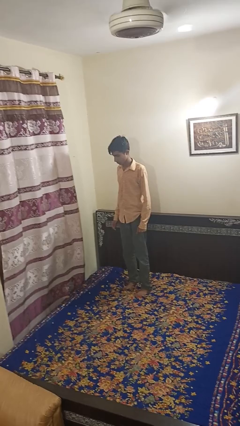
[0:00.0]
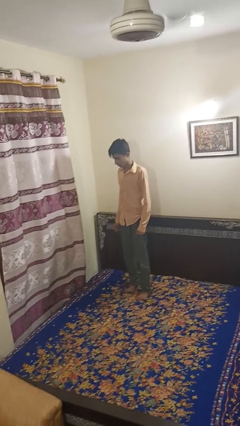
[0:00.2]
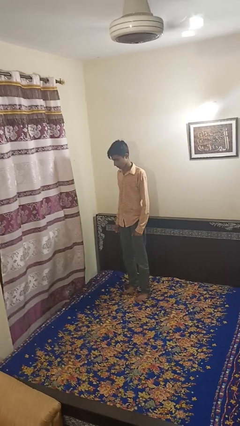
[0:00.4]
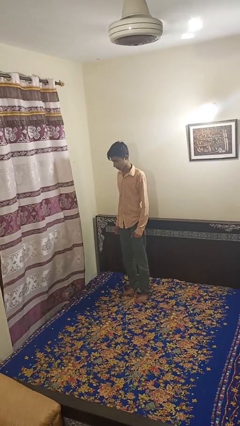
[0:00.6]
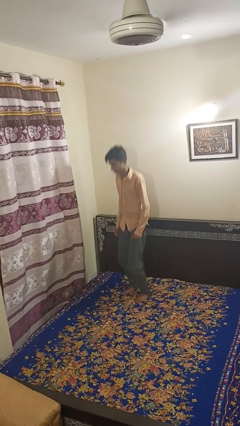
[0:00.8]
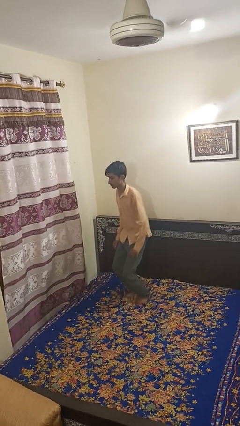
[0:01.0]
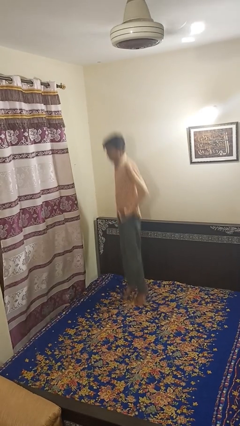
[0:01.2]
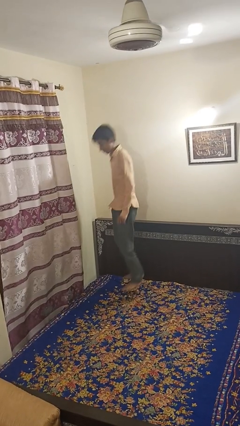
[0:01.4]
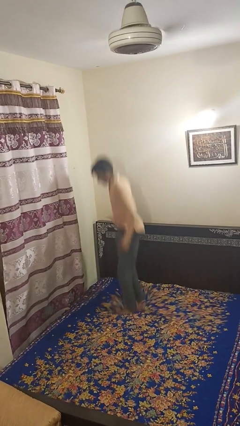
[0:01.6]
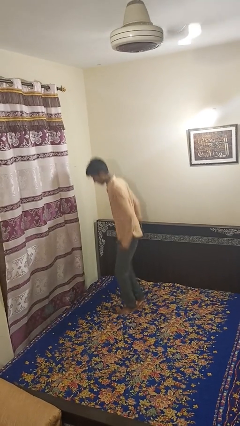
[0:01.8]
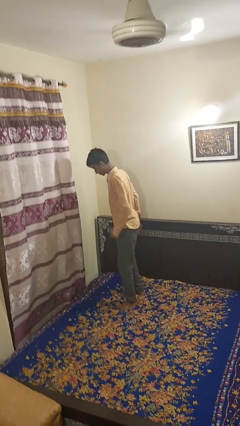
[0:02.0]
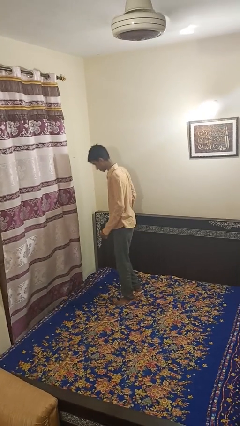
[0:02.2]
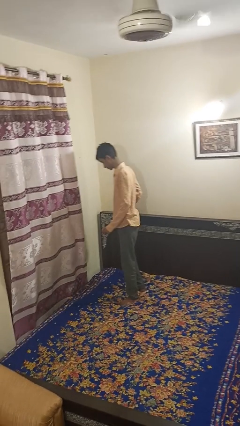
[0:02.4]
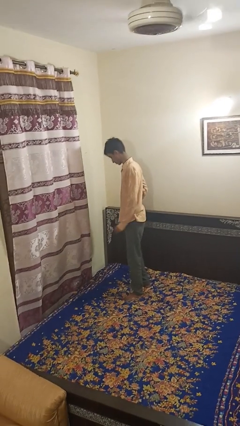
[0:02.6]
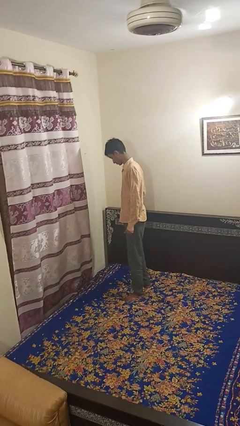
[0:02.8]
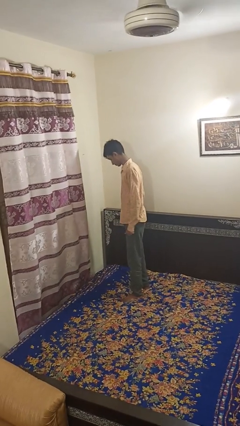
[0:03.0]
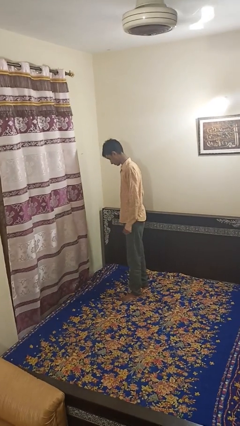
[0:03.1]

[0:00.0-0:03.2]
person jumps on bed

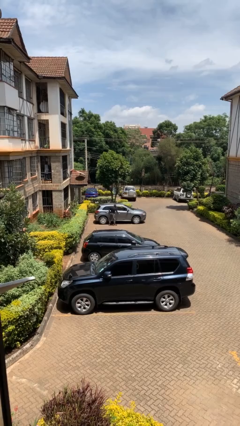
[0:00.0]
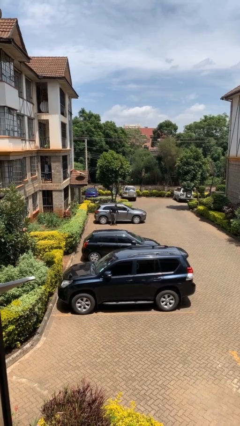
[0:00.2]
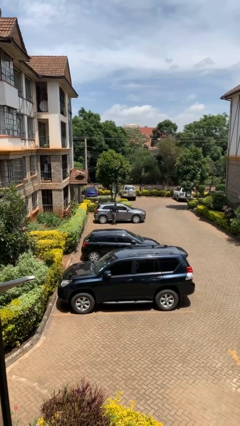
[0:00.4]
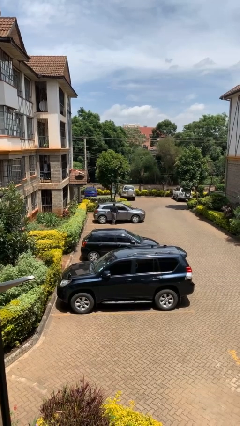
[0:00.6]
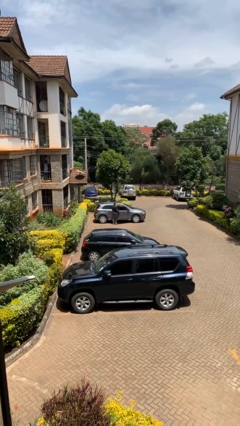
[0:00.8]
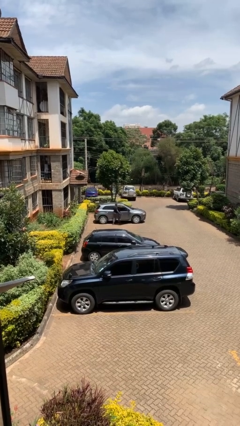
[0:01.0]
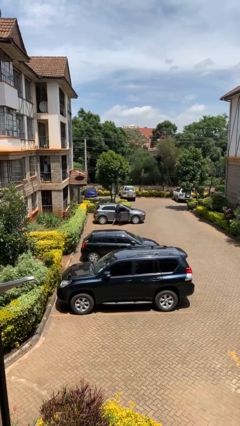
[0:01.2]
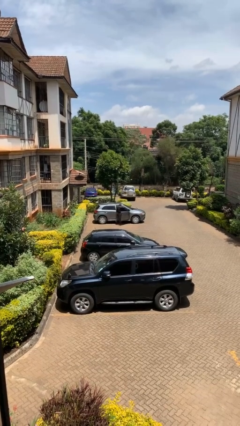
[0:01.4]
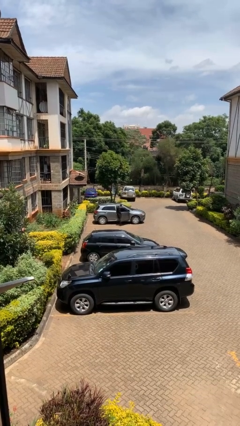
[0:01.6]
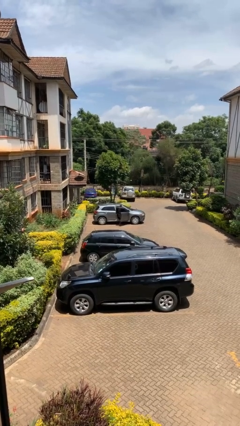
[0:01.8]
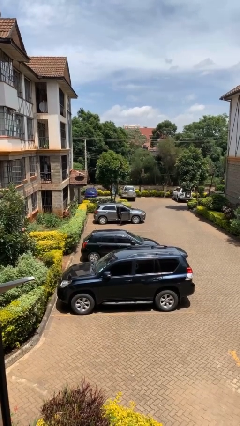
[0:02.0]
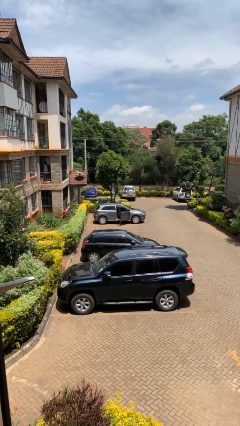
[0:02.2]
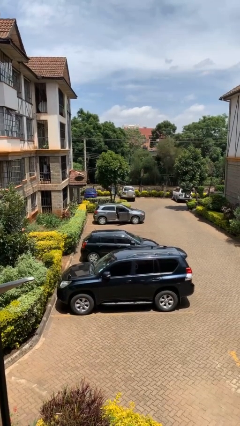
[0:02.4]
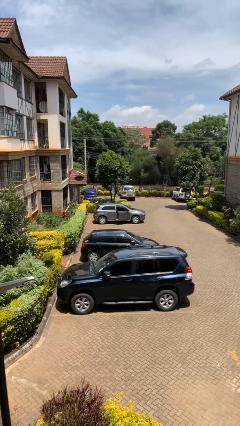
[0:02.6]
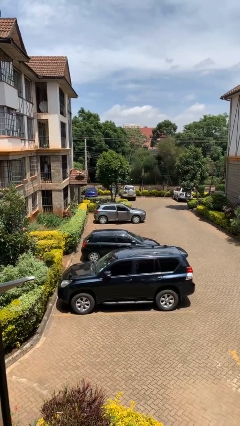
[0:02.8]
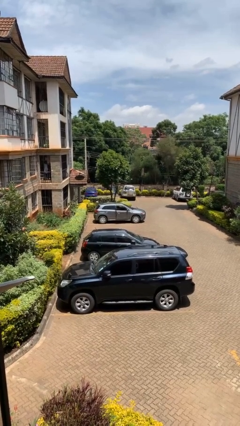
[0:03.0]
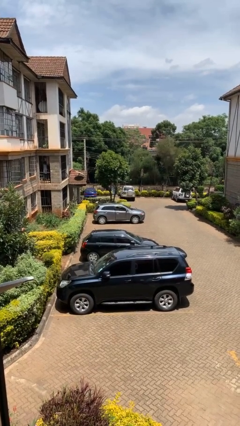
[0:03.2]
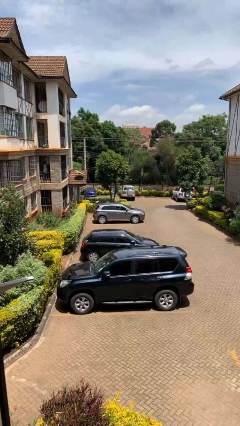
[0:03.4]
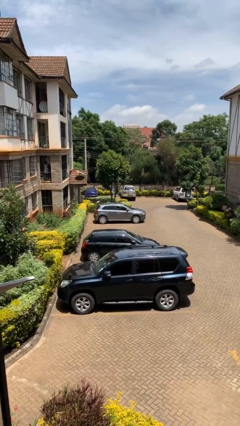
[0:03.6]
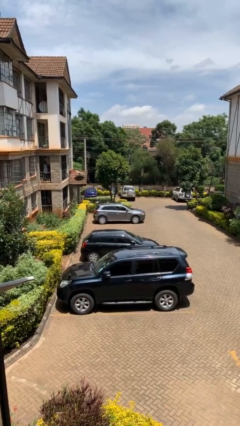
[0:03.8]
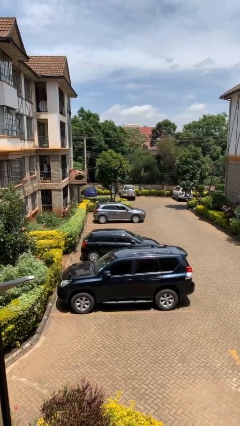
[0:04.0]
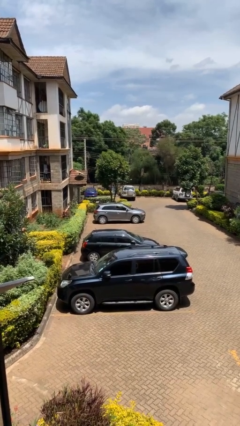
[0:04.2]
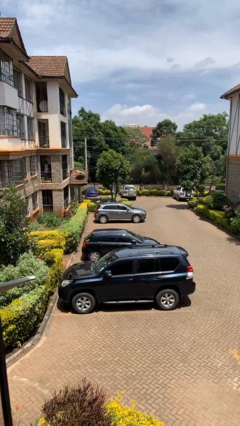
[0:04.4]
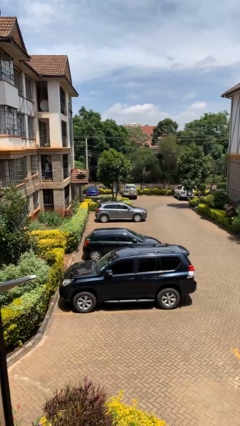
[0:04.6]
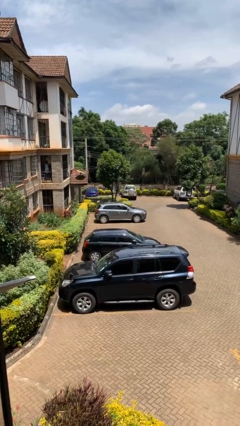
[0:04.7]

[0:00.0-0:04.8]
car picks up person

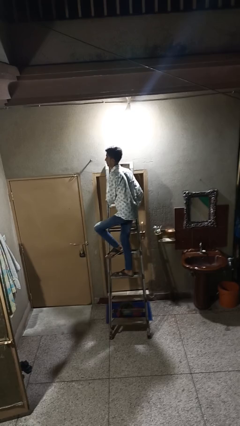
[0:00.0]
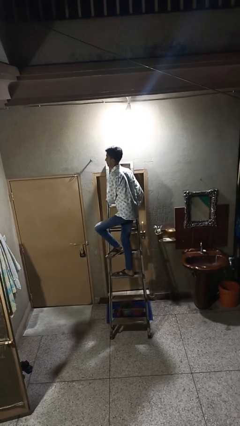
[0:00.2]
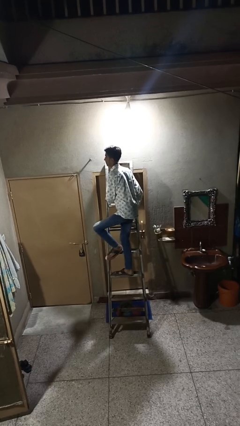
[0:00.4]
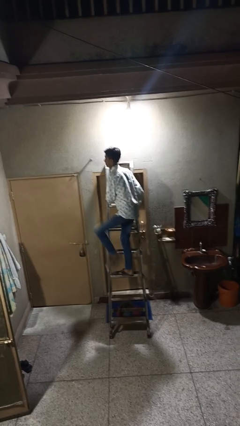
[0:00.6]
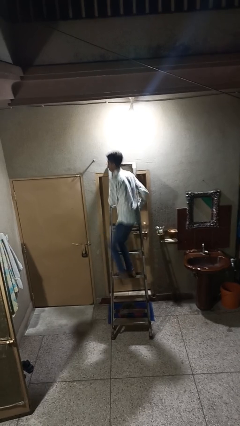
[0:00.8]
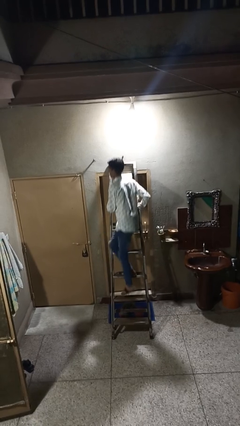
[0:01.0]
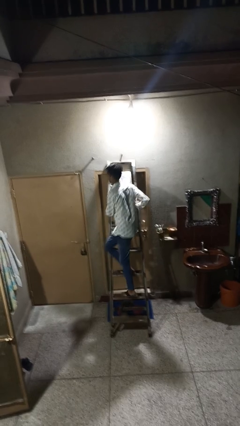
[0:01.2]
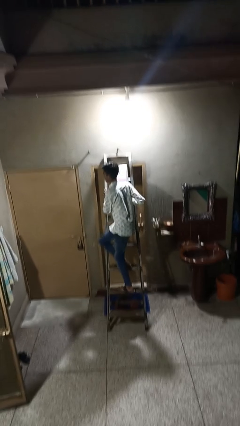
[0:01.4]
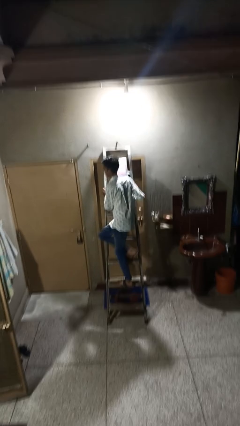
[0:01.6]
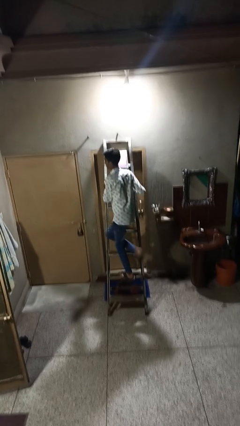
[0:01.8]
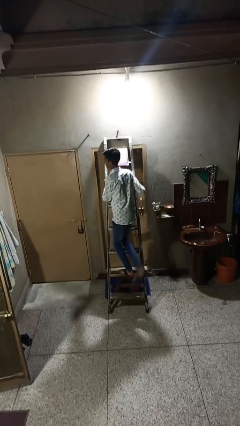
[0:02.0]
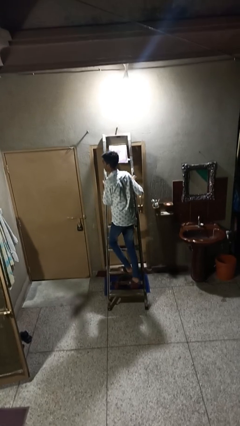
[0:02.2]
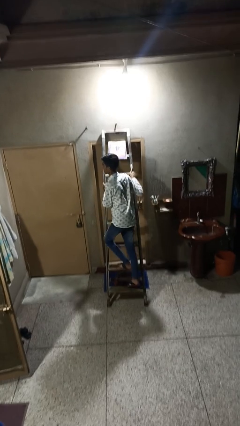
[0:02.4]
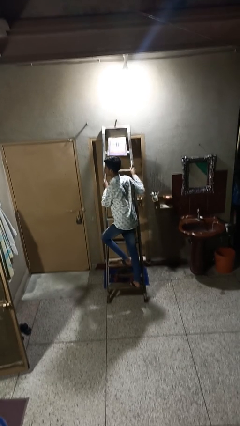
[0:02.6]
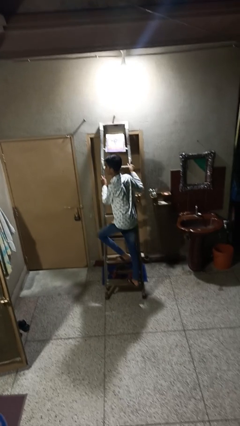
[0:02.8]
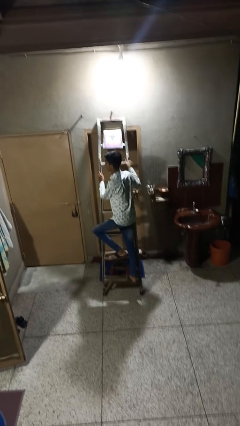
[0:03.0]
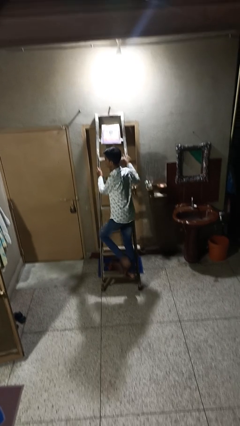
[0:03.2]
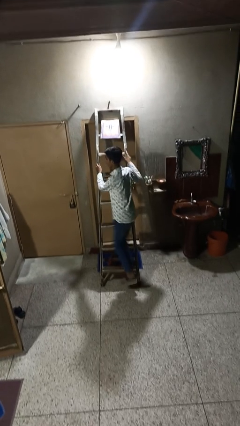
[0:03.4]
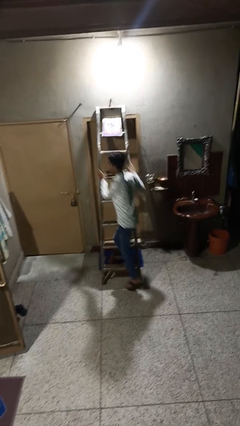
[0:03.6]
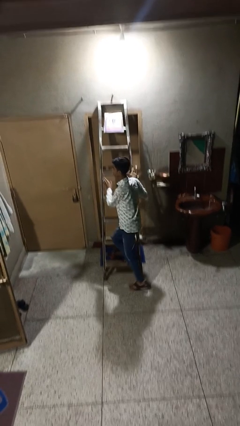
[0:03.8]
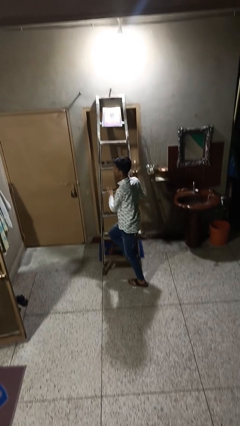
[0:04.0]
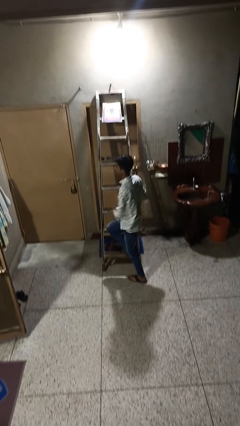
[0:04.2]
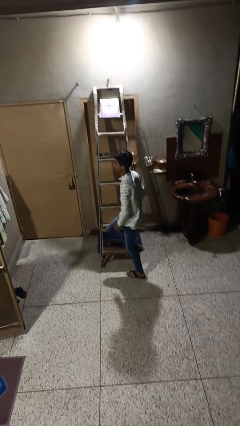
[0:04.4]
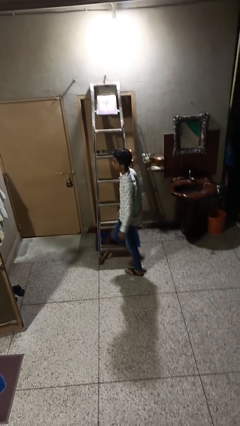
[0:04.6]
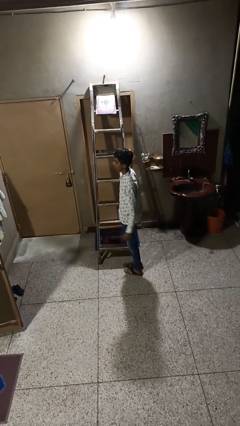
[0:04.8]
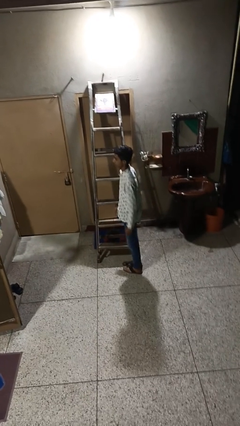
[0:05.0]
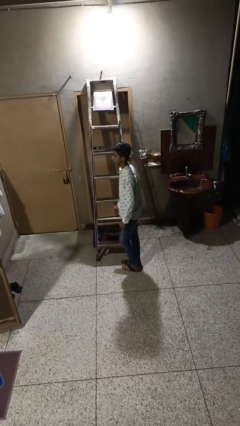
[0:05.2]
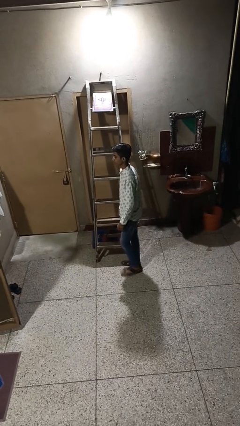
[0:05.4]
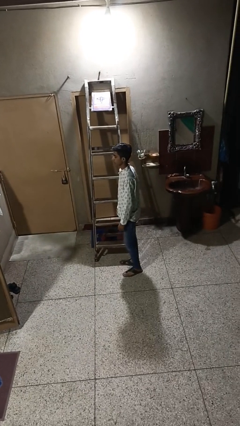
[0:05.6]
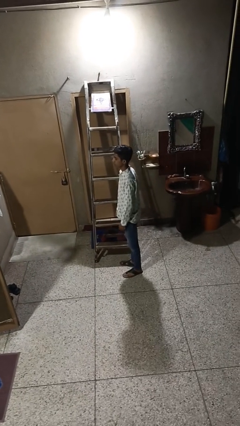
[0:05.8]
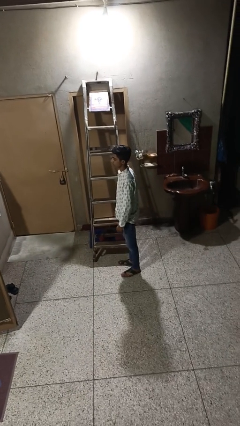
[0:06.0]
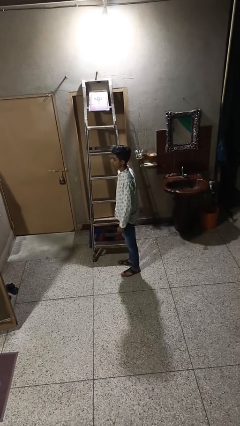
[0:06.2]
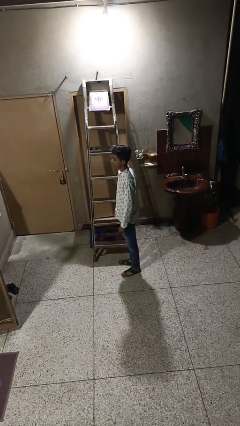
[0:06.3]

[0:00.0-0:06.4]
person climbs down ladder

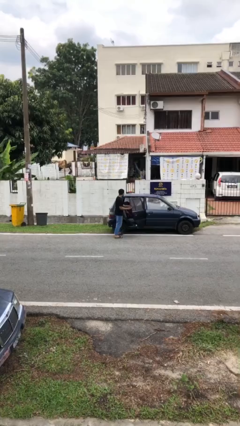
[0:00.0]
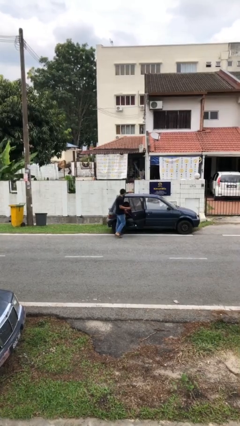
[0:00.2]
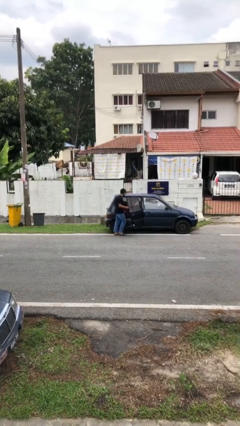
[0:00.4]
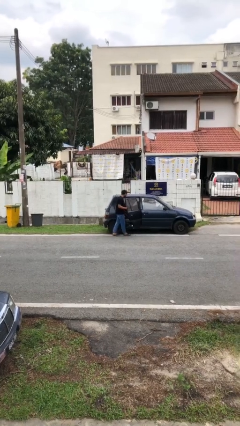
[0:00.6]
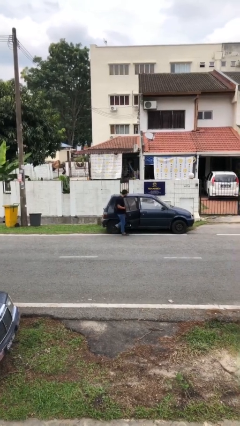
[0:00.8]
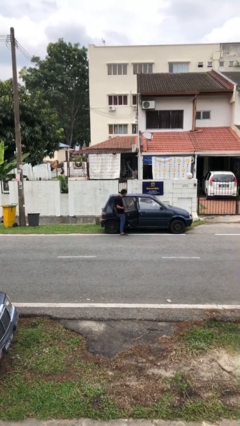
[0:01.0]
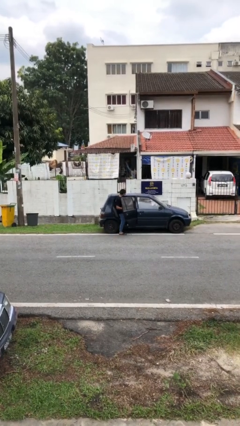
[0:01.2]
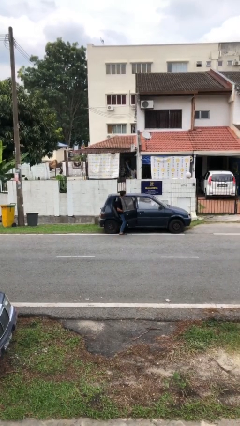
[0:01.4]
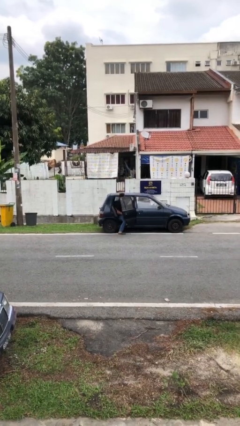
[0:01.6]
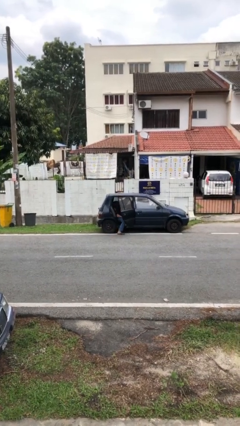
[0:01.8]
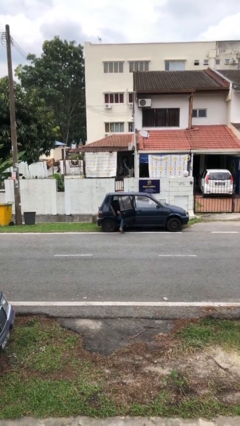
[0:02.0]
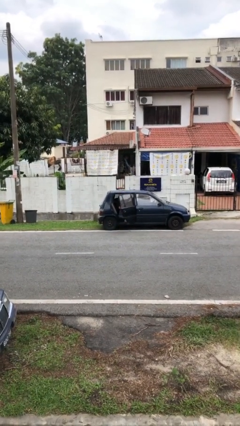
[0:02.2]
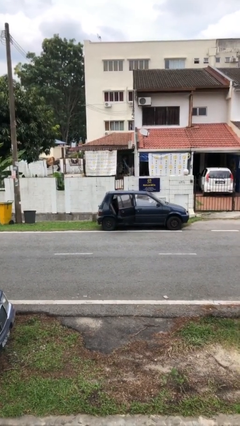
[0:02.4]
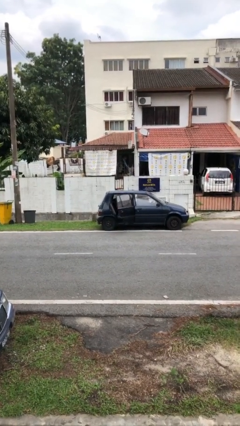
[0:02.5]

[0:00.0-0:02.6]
person enters car

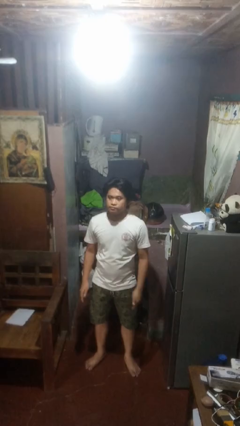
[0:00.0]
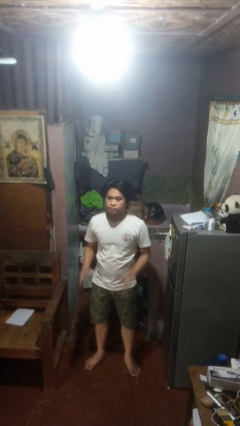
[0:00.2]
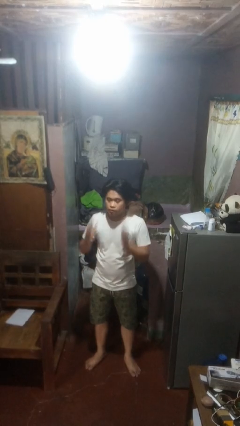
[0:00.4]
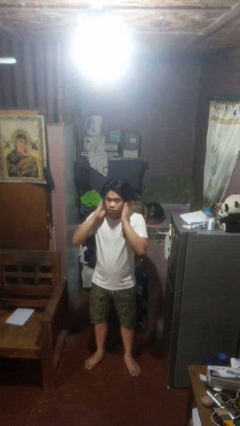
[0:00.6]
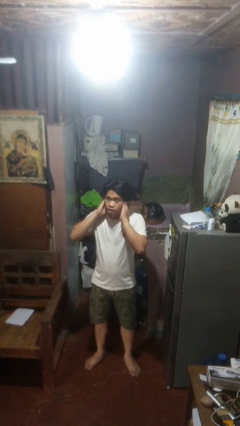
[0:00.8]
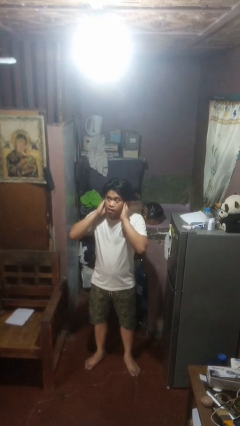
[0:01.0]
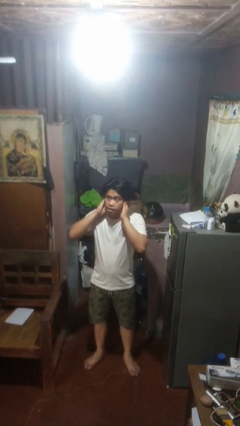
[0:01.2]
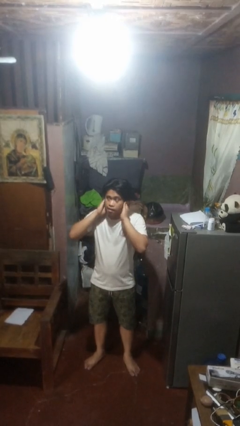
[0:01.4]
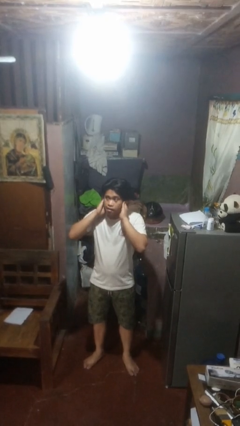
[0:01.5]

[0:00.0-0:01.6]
person puts fingers in ear
